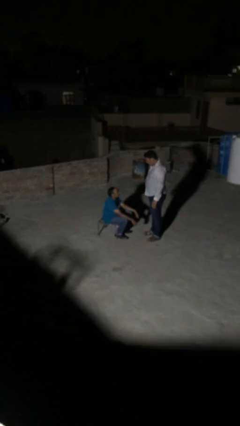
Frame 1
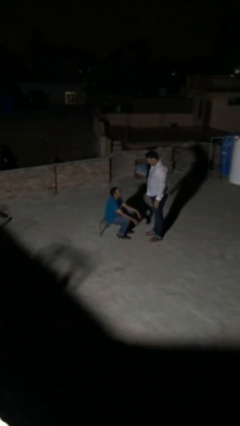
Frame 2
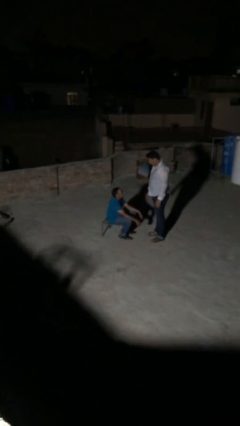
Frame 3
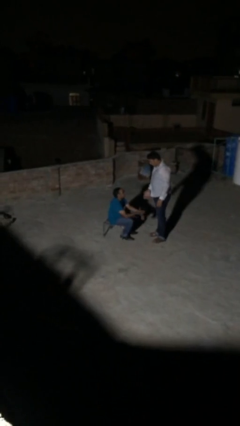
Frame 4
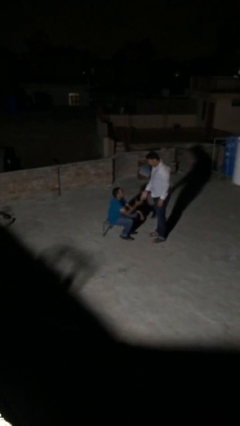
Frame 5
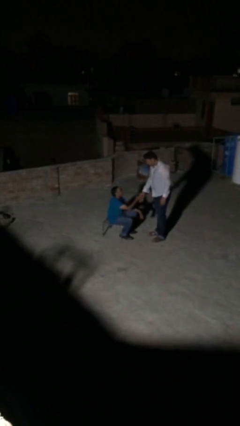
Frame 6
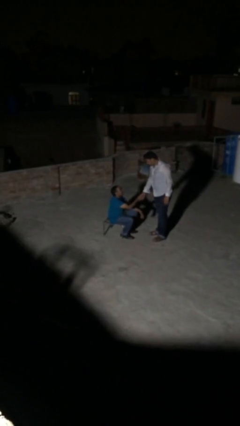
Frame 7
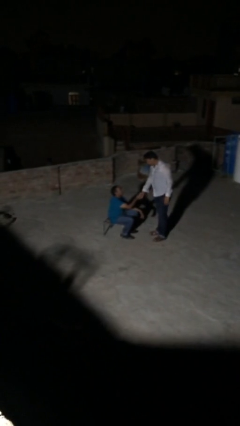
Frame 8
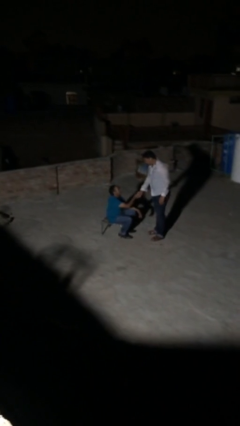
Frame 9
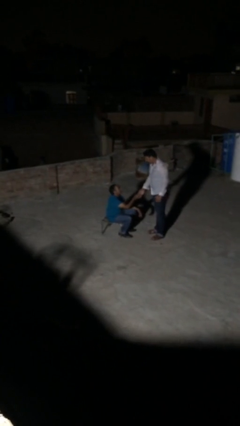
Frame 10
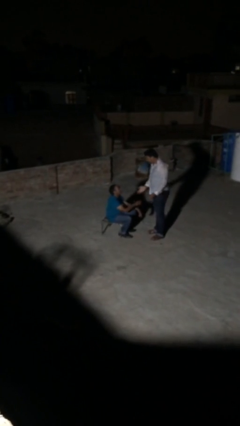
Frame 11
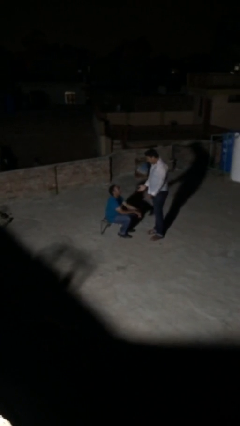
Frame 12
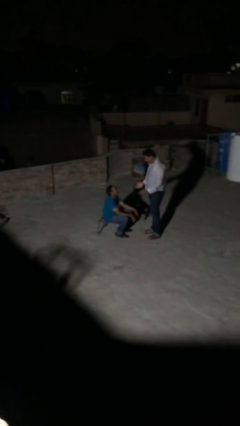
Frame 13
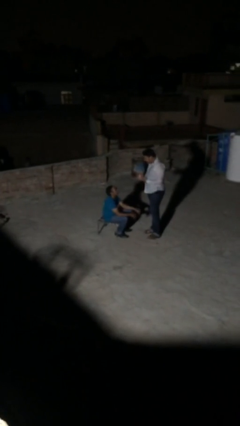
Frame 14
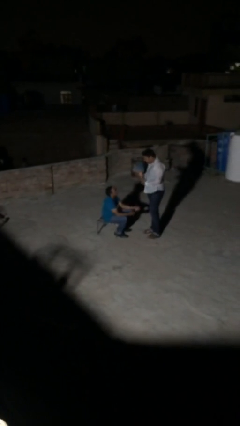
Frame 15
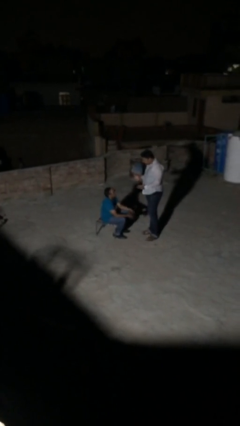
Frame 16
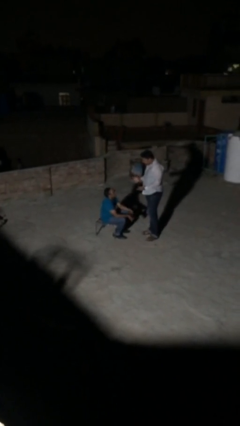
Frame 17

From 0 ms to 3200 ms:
person shakes hand

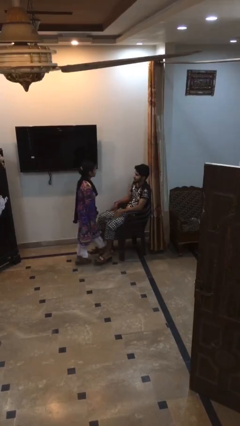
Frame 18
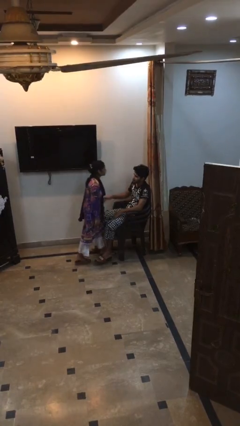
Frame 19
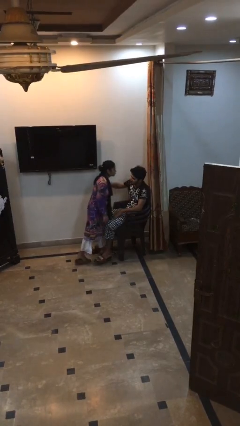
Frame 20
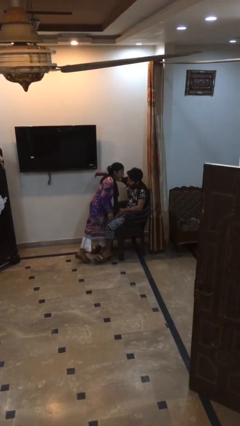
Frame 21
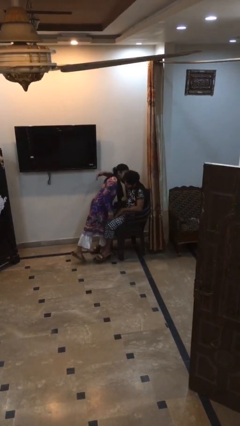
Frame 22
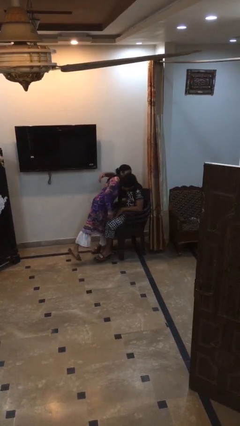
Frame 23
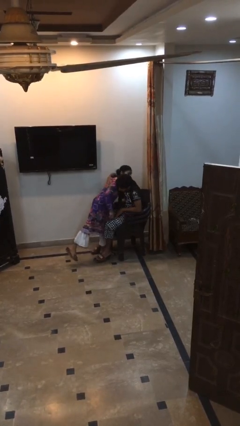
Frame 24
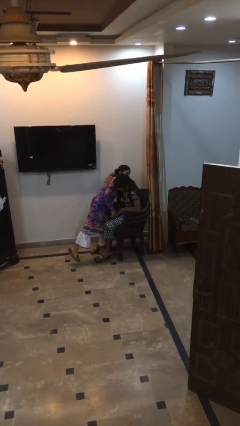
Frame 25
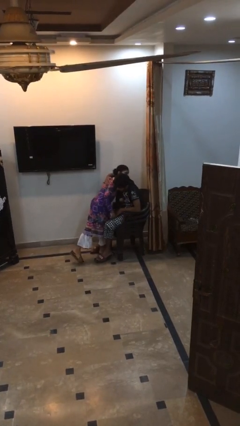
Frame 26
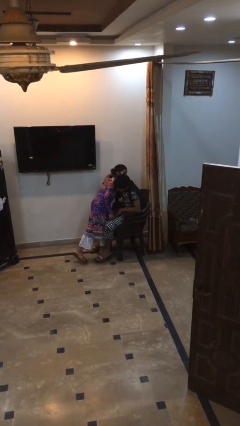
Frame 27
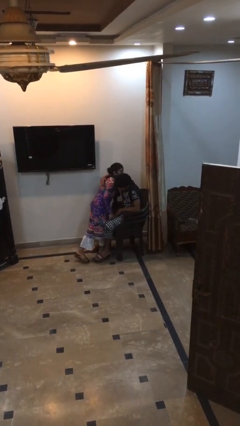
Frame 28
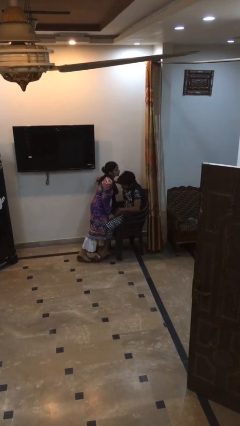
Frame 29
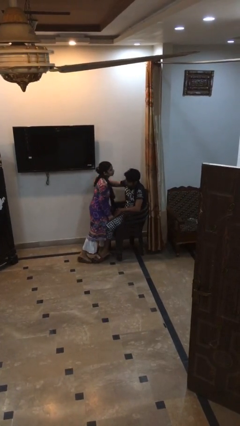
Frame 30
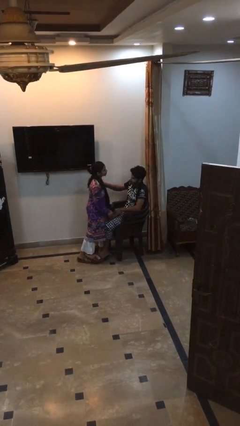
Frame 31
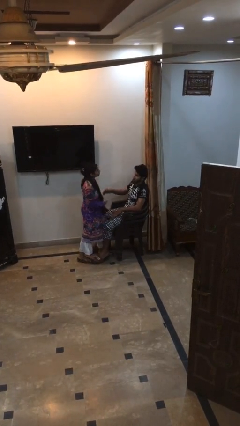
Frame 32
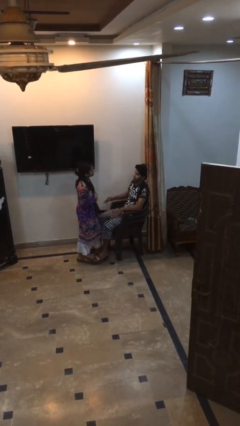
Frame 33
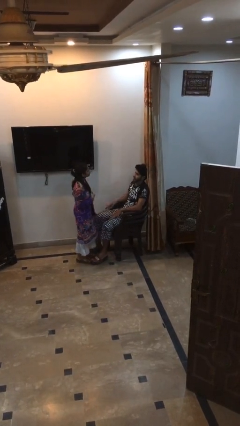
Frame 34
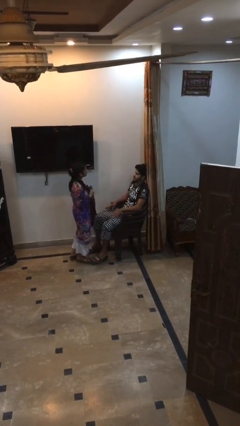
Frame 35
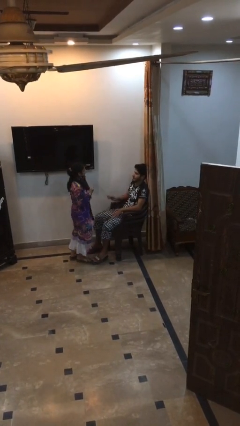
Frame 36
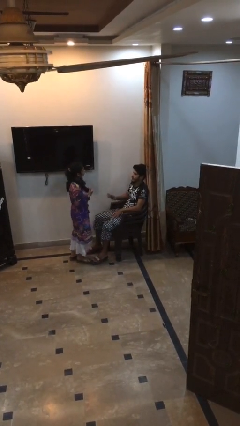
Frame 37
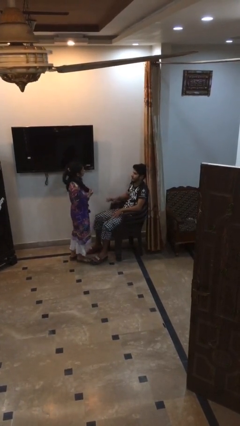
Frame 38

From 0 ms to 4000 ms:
person embraces person

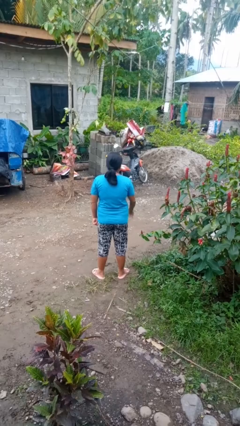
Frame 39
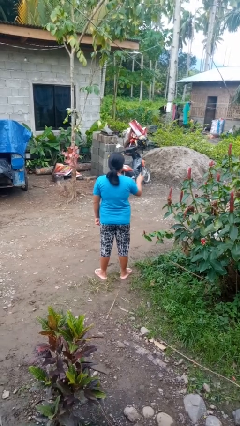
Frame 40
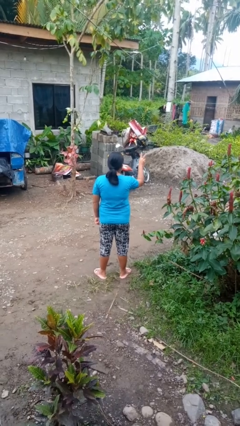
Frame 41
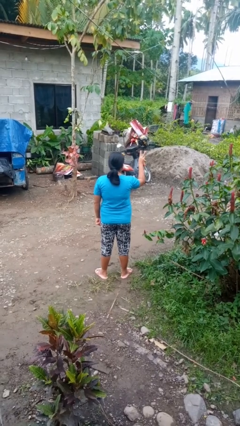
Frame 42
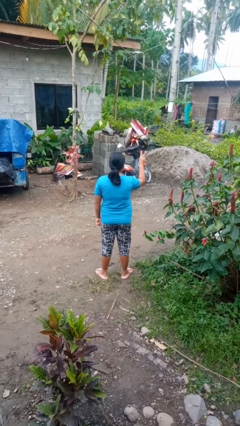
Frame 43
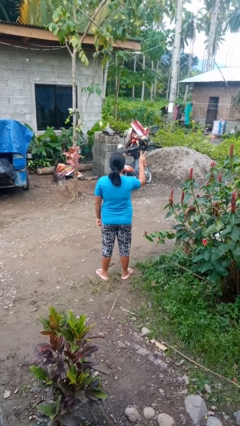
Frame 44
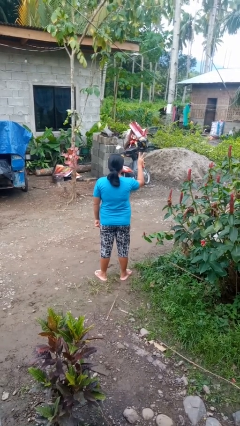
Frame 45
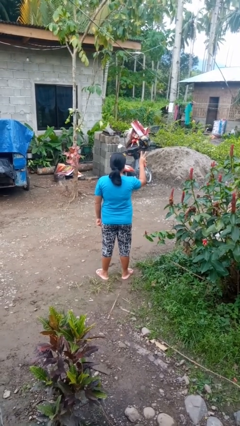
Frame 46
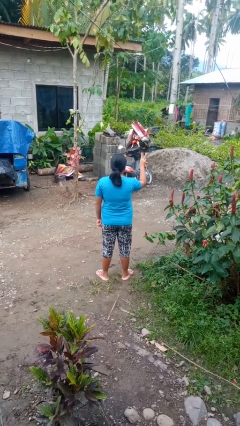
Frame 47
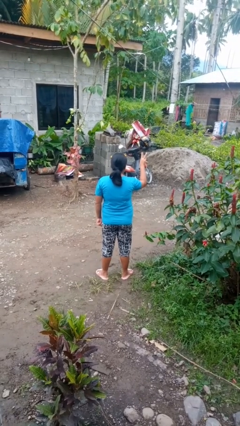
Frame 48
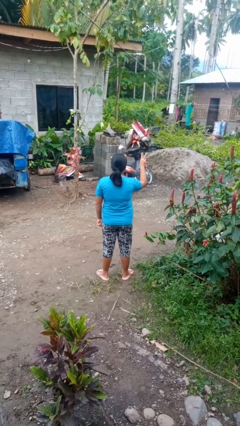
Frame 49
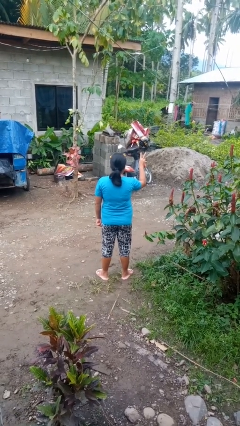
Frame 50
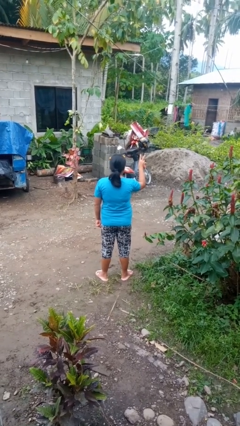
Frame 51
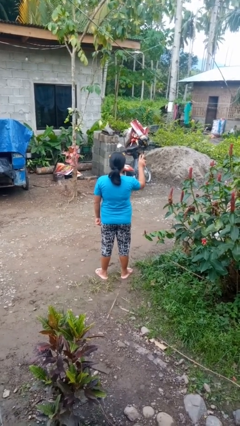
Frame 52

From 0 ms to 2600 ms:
person gestures peace

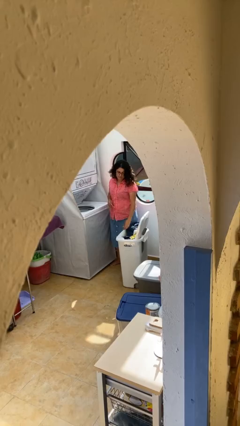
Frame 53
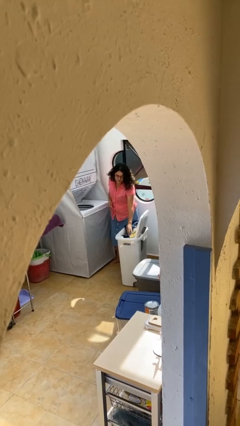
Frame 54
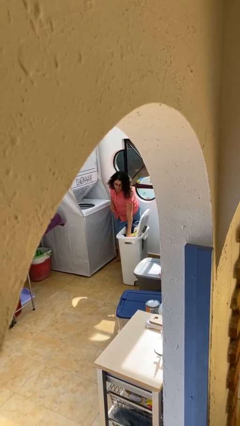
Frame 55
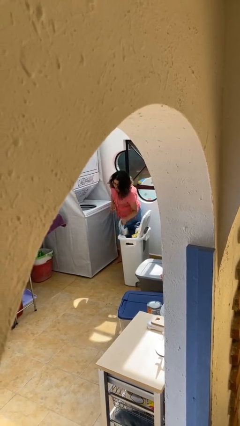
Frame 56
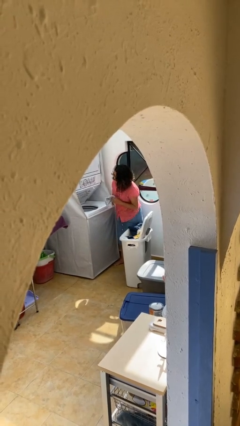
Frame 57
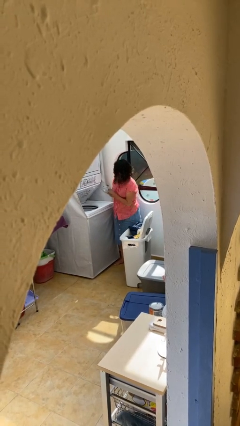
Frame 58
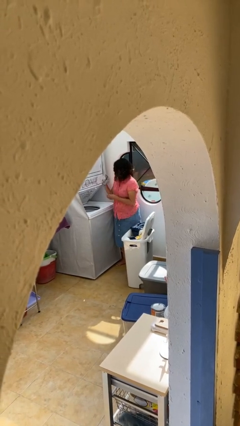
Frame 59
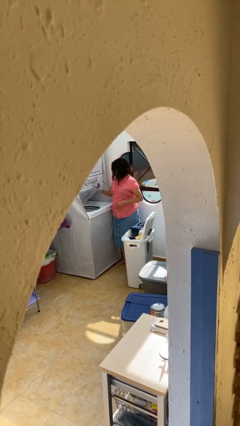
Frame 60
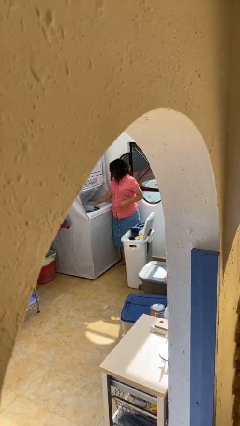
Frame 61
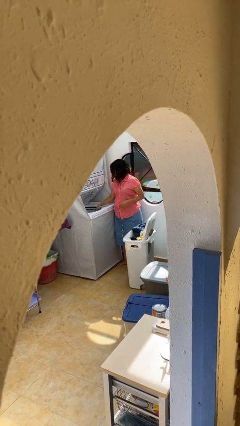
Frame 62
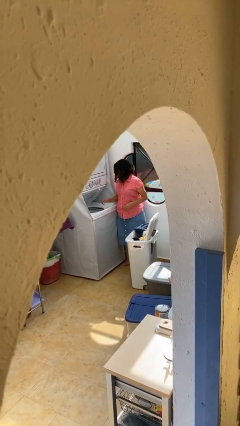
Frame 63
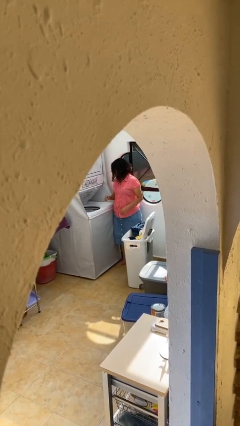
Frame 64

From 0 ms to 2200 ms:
person loads clotheswasher

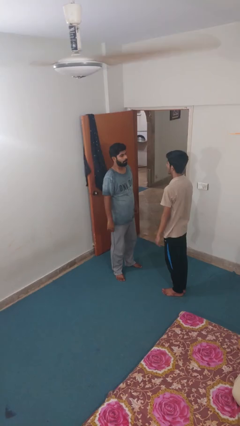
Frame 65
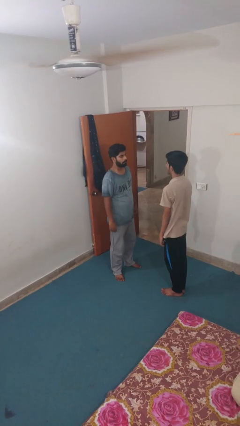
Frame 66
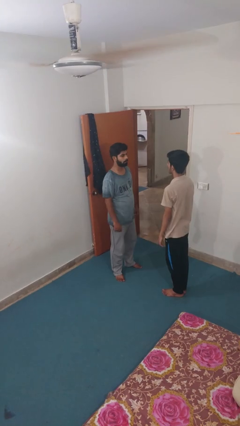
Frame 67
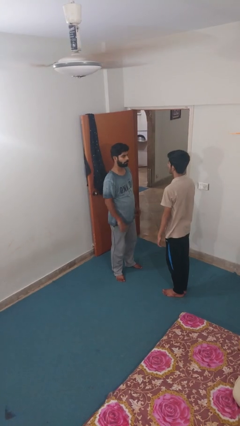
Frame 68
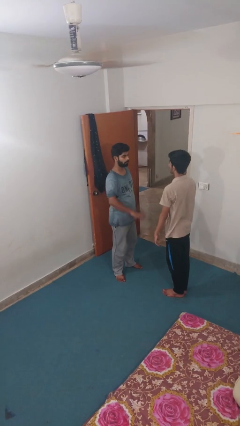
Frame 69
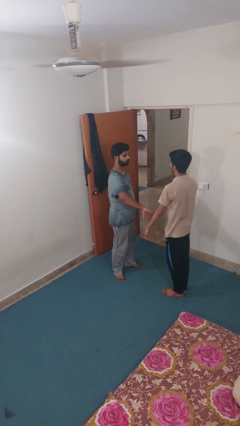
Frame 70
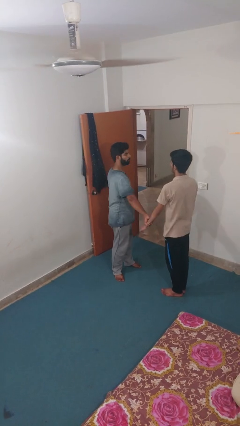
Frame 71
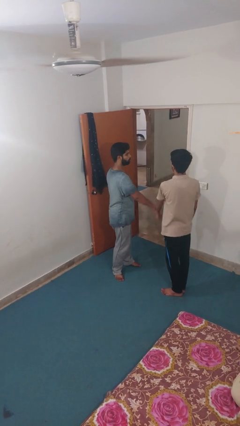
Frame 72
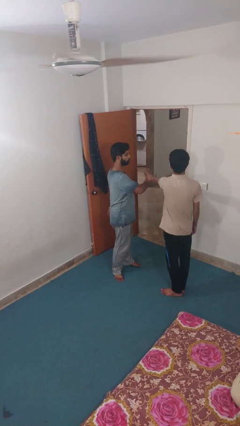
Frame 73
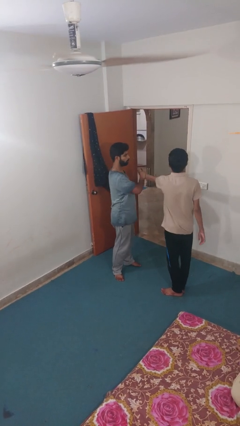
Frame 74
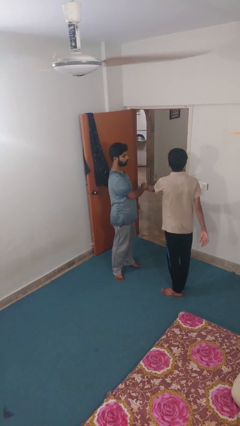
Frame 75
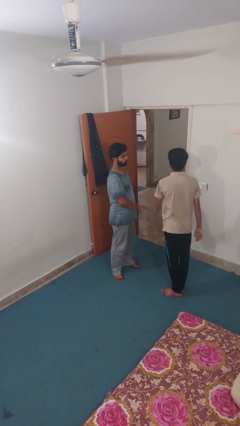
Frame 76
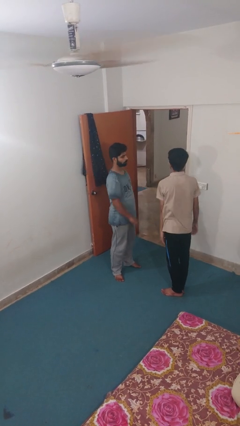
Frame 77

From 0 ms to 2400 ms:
person grabs person by forearm

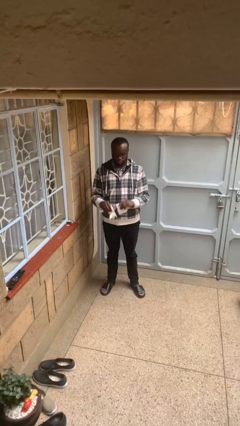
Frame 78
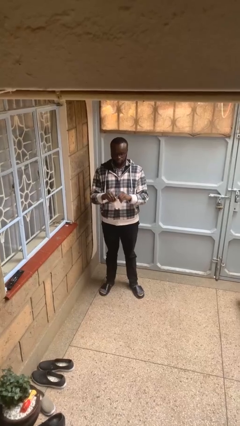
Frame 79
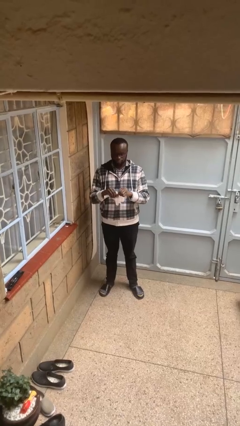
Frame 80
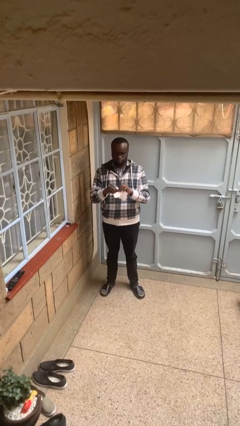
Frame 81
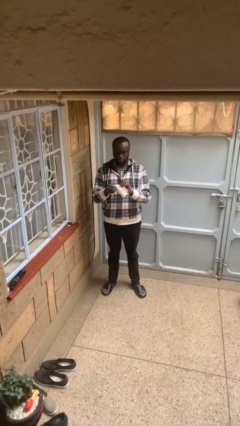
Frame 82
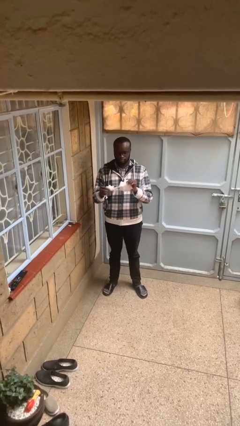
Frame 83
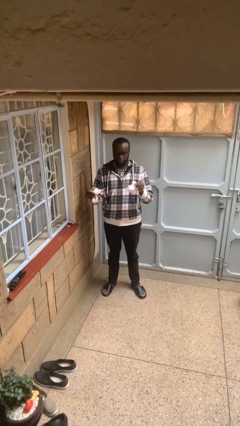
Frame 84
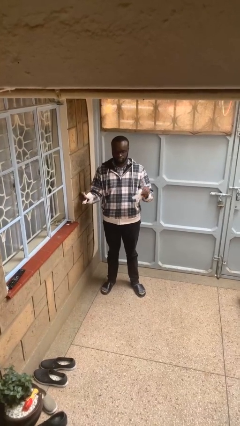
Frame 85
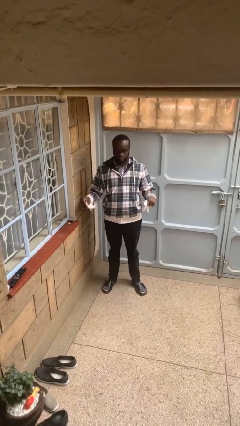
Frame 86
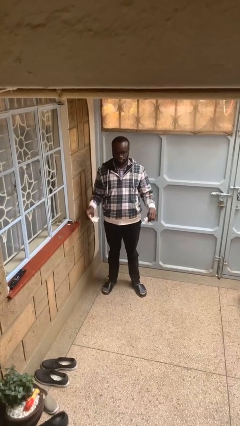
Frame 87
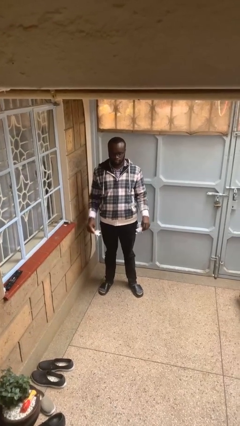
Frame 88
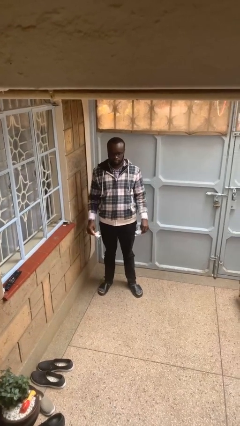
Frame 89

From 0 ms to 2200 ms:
person tears paper

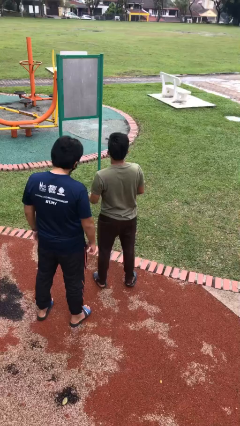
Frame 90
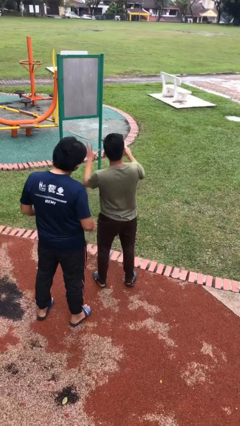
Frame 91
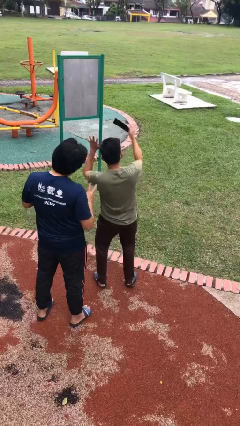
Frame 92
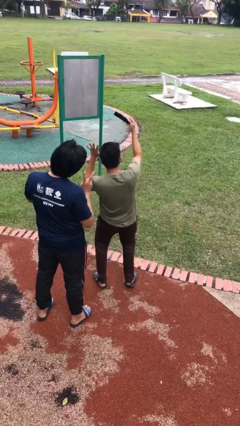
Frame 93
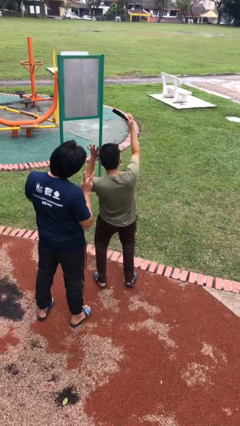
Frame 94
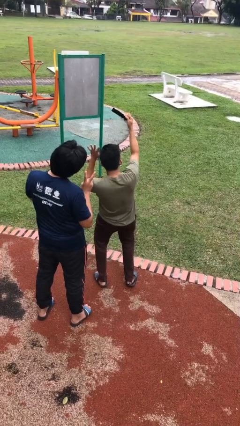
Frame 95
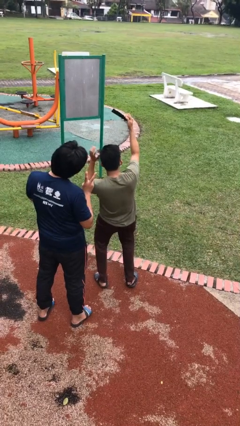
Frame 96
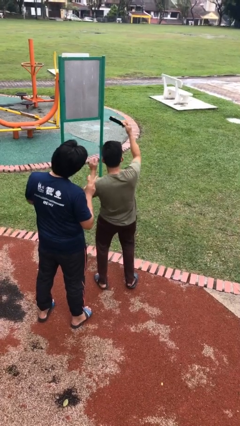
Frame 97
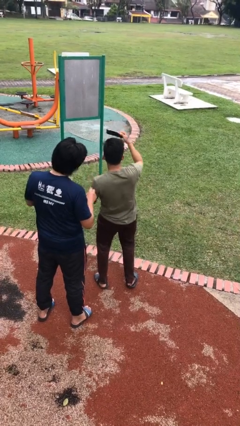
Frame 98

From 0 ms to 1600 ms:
person takes selfie with person
